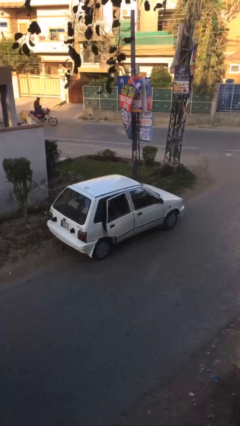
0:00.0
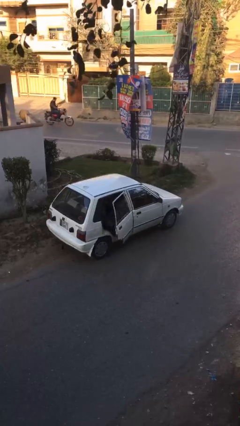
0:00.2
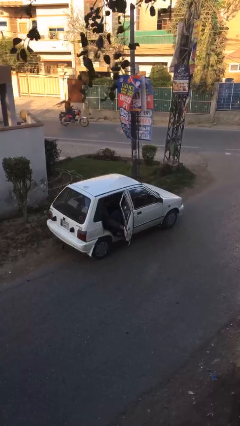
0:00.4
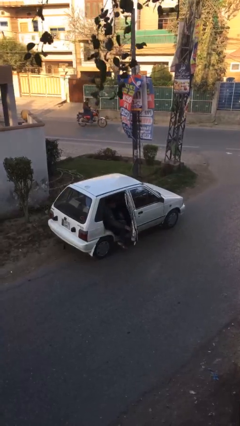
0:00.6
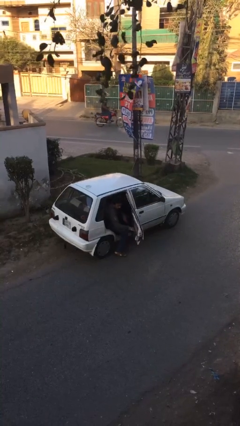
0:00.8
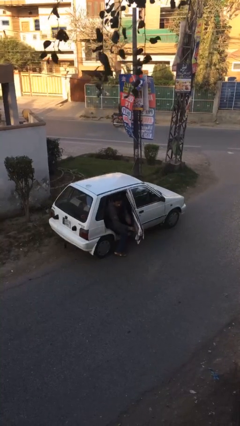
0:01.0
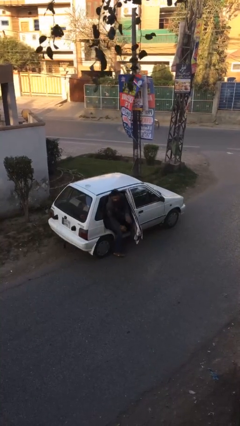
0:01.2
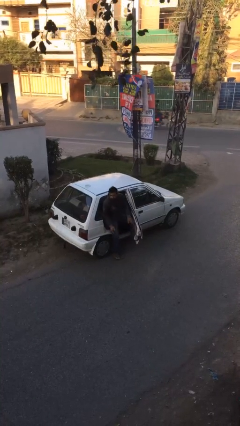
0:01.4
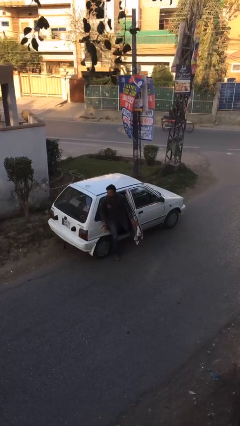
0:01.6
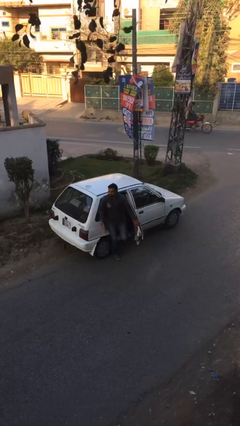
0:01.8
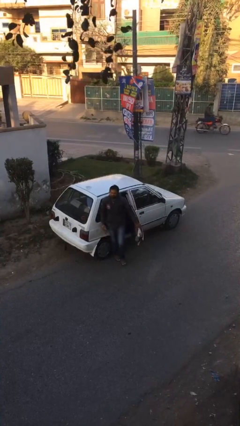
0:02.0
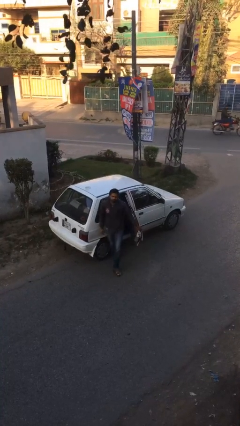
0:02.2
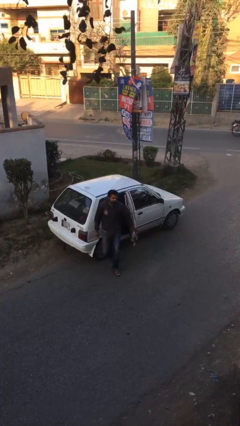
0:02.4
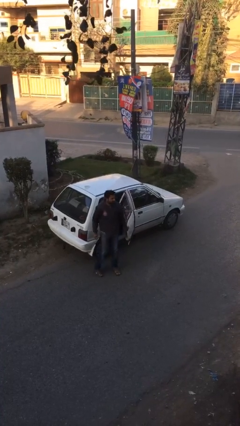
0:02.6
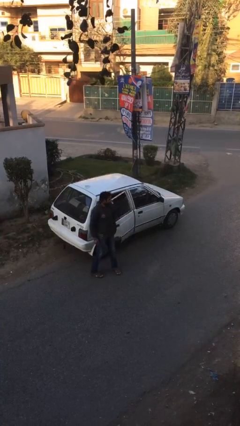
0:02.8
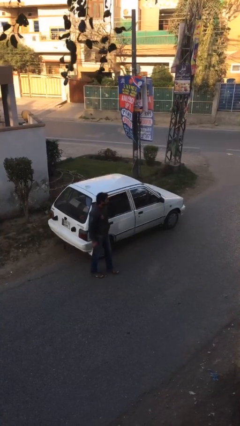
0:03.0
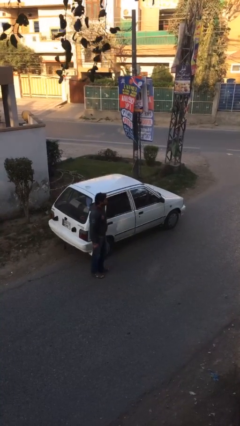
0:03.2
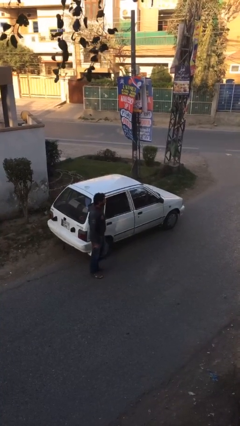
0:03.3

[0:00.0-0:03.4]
car drops off person

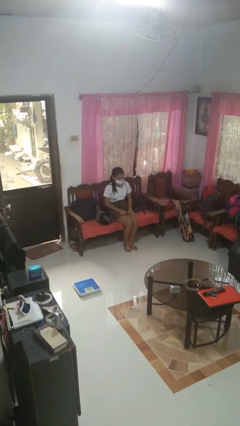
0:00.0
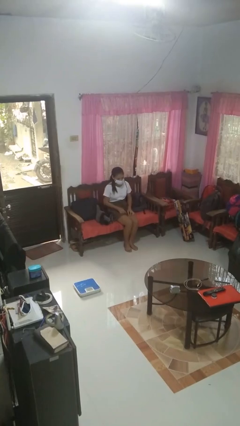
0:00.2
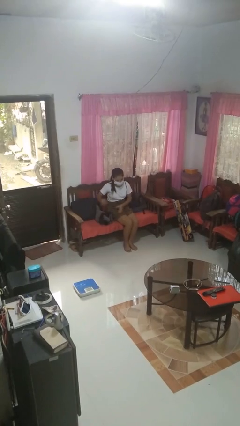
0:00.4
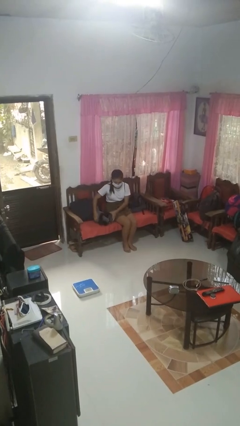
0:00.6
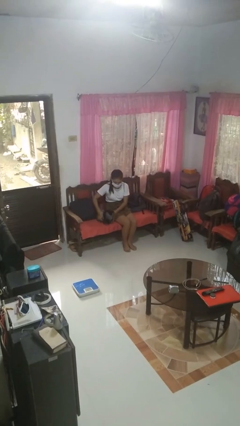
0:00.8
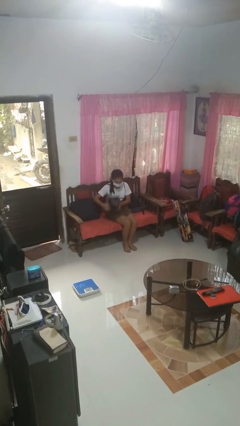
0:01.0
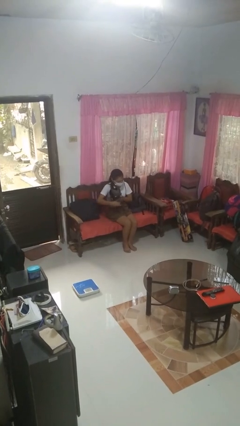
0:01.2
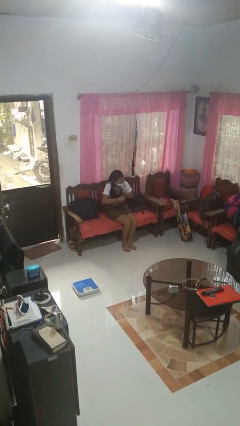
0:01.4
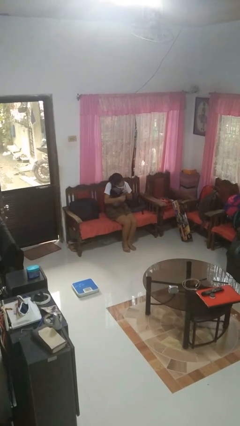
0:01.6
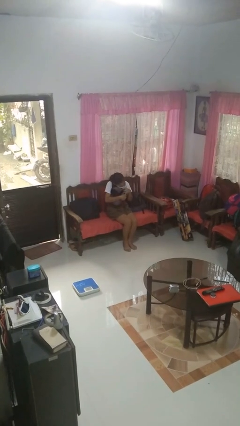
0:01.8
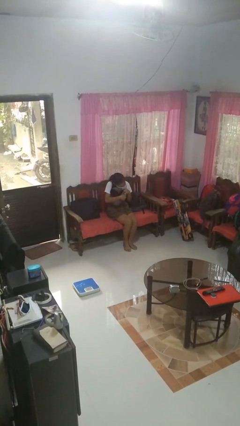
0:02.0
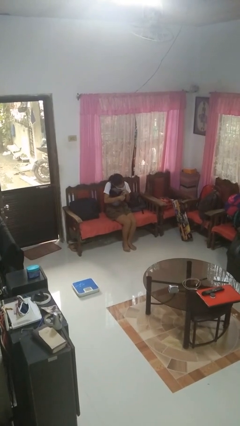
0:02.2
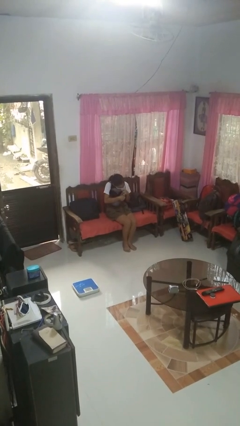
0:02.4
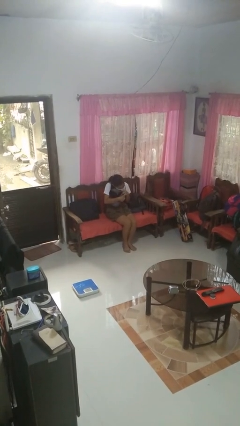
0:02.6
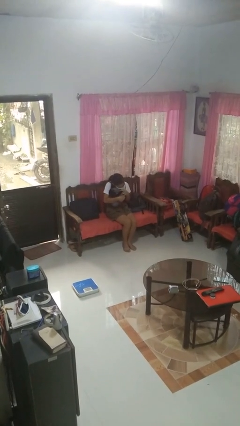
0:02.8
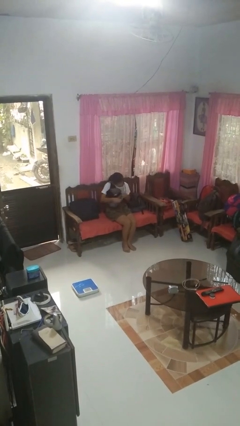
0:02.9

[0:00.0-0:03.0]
person hugs stuffed animal

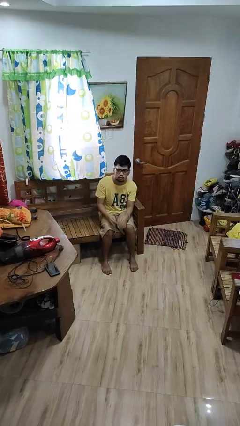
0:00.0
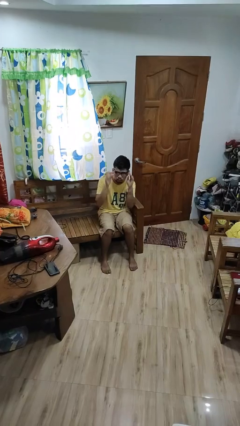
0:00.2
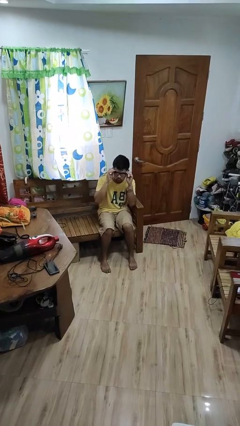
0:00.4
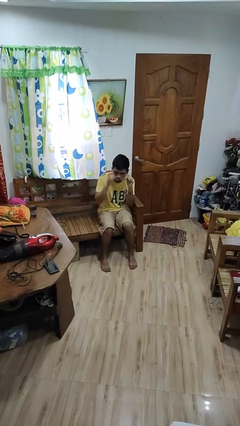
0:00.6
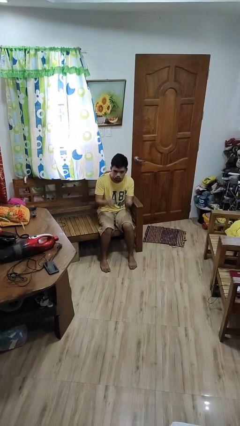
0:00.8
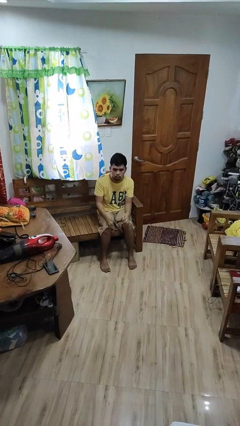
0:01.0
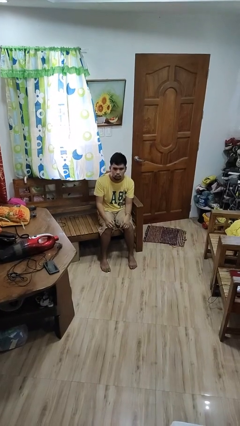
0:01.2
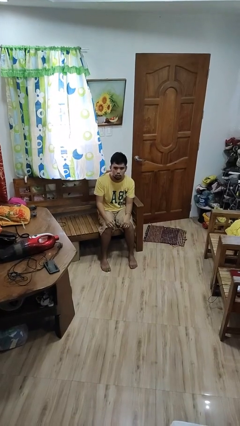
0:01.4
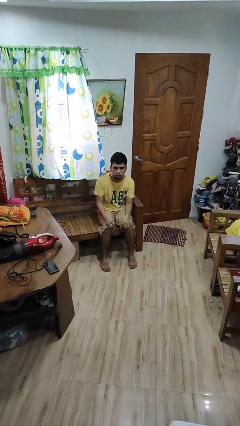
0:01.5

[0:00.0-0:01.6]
person takes off glasses

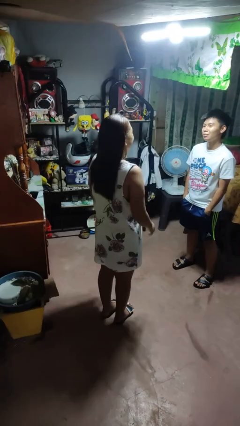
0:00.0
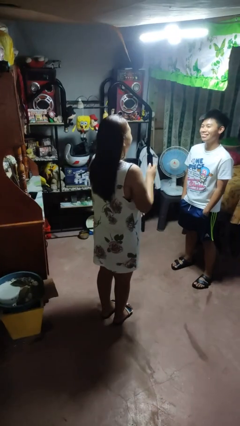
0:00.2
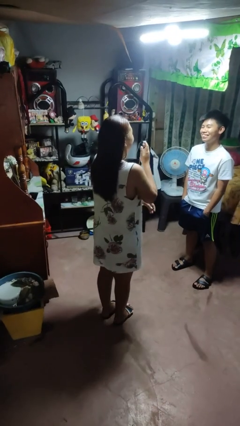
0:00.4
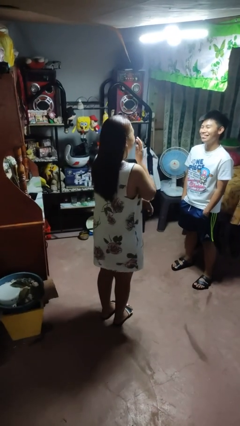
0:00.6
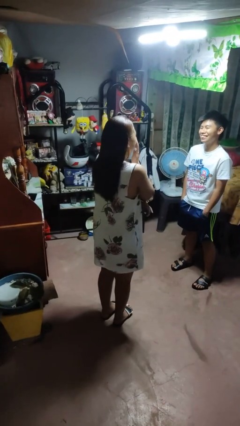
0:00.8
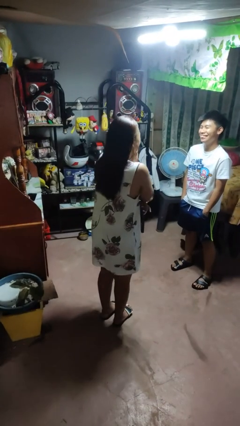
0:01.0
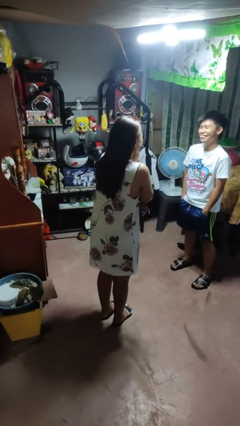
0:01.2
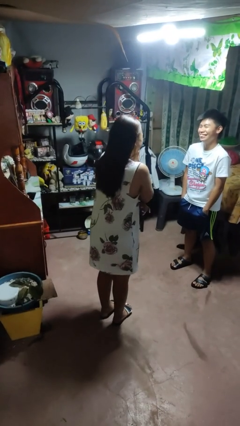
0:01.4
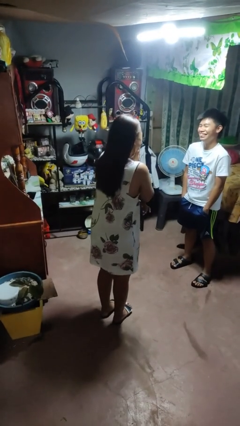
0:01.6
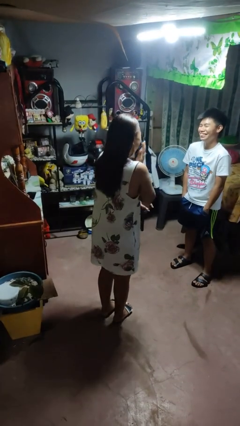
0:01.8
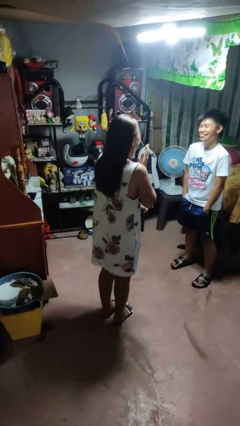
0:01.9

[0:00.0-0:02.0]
person laughs with person

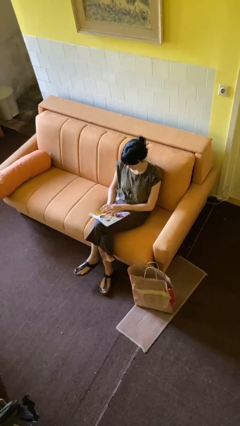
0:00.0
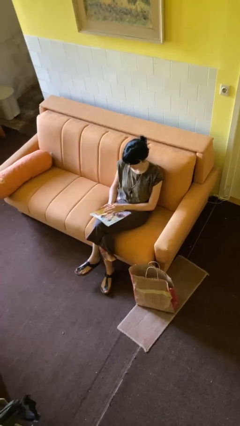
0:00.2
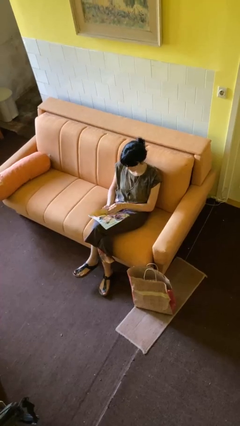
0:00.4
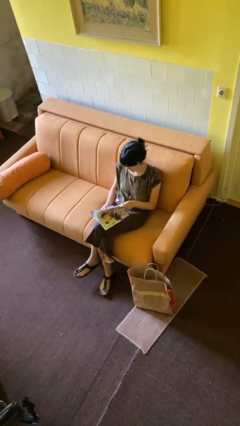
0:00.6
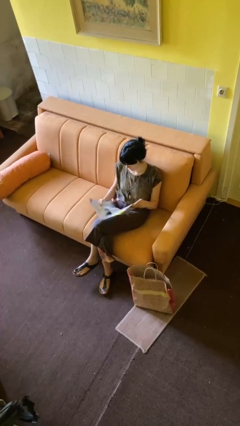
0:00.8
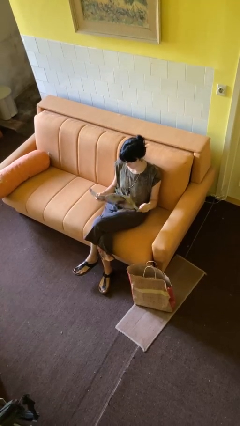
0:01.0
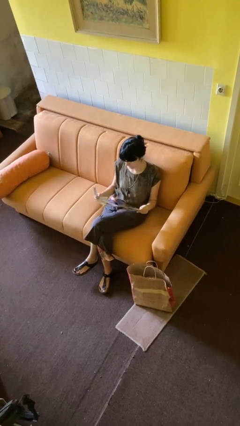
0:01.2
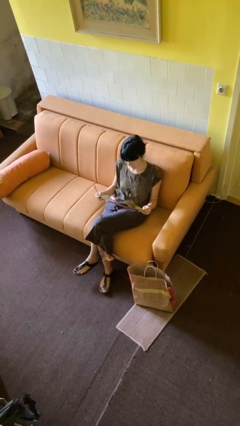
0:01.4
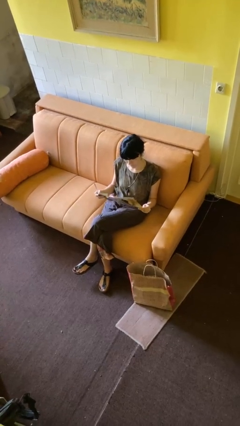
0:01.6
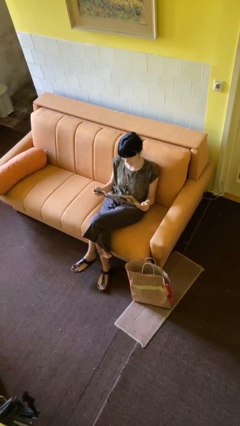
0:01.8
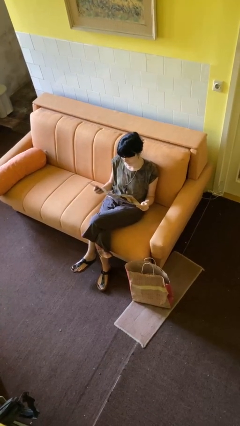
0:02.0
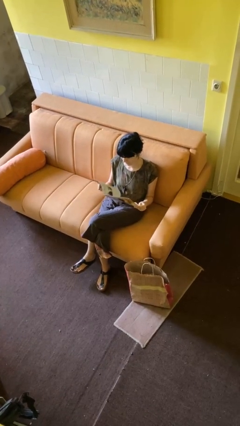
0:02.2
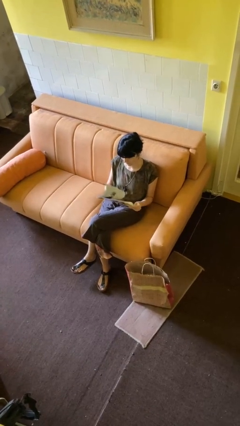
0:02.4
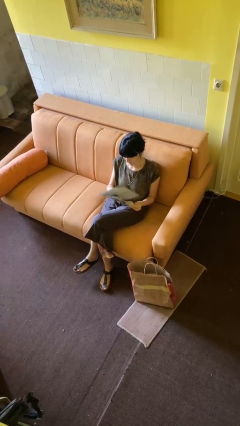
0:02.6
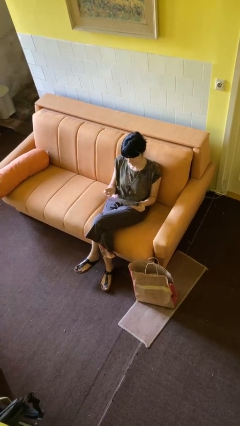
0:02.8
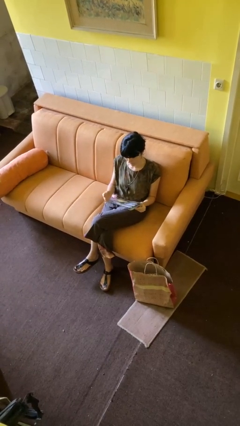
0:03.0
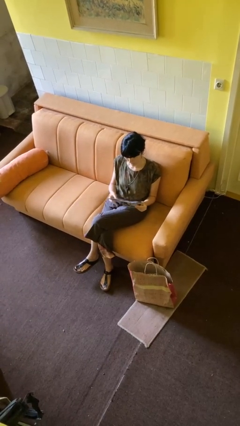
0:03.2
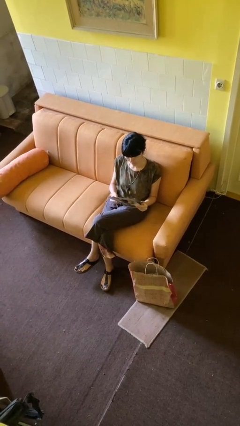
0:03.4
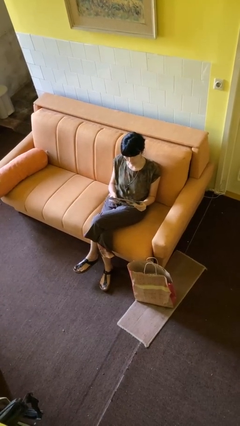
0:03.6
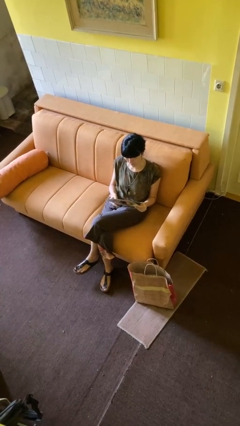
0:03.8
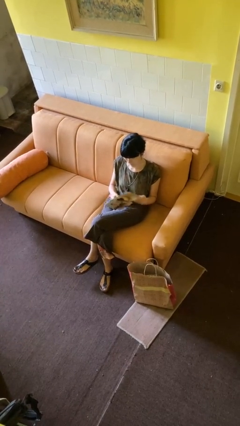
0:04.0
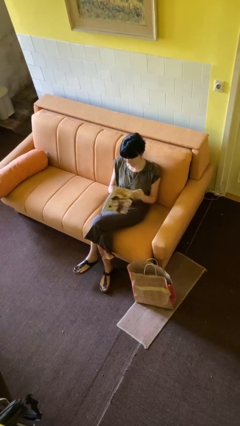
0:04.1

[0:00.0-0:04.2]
person reads magazine

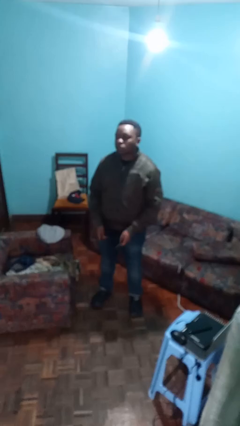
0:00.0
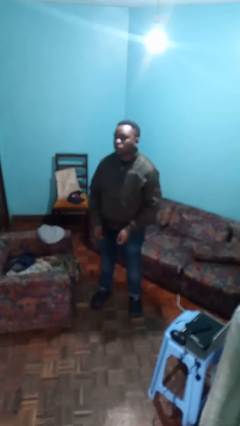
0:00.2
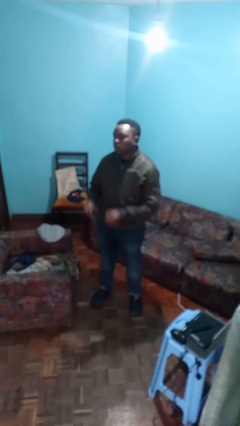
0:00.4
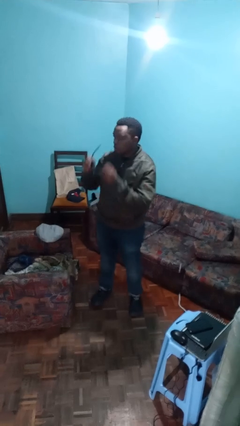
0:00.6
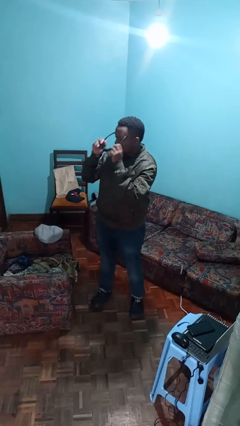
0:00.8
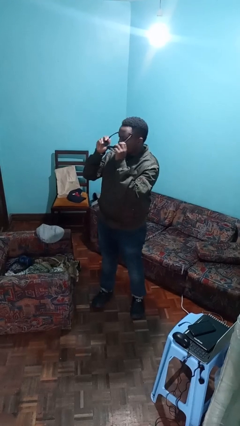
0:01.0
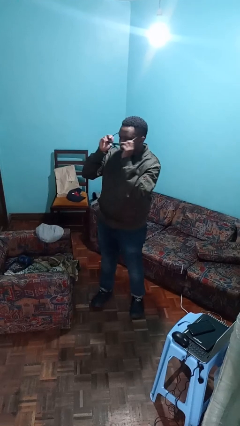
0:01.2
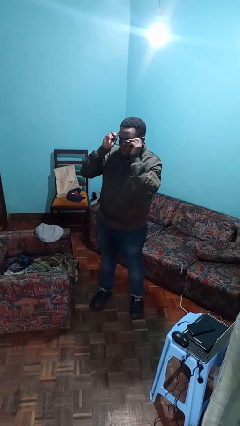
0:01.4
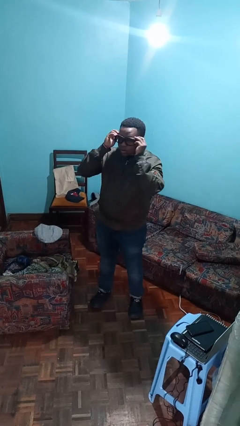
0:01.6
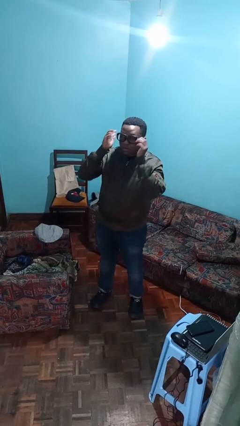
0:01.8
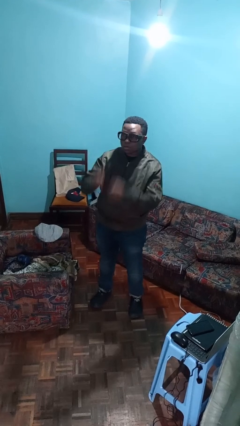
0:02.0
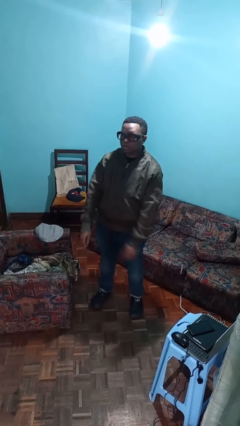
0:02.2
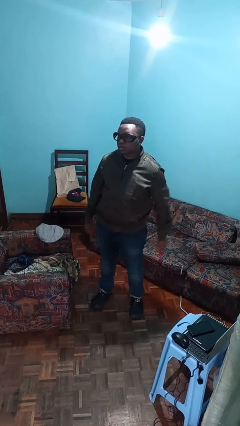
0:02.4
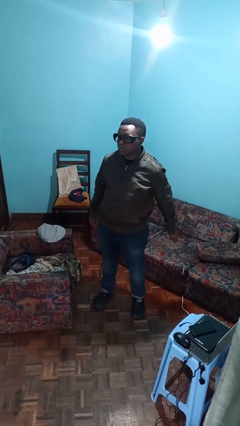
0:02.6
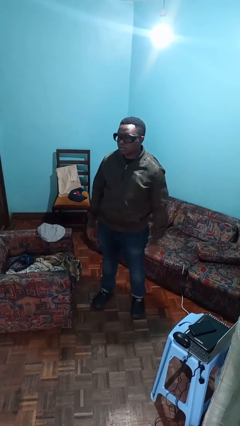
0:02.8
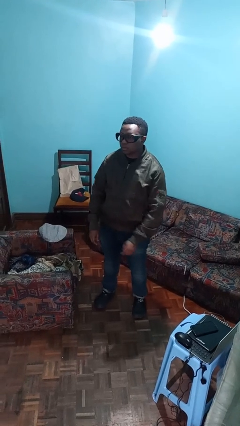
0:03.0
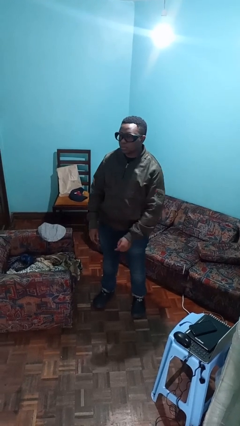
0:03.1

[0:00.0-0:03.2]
person puts on glasses

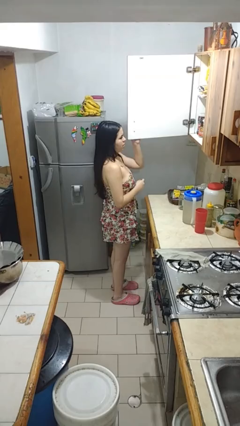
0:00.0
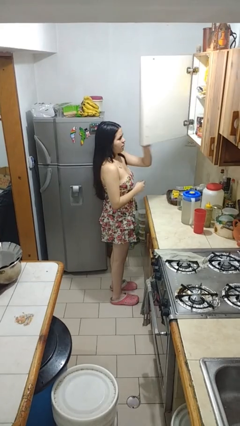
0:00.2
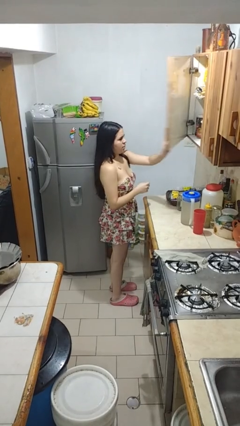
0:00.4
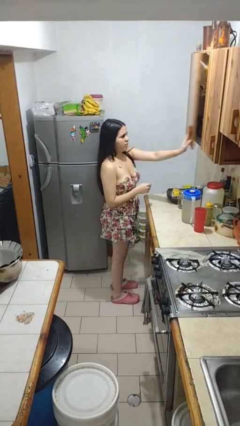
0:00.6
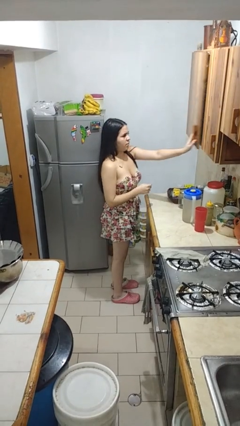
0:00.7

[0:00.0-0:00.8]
person closes cabinet
